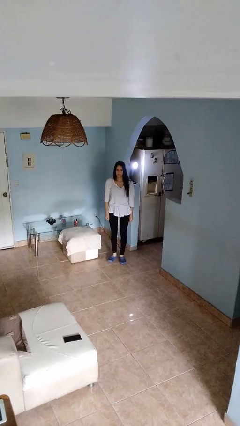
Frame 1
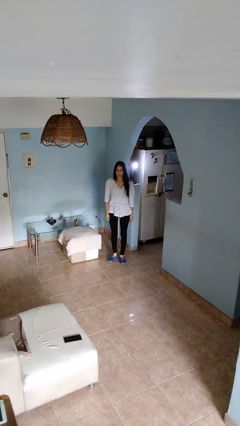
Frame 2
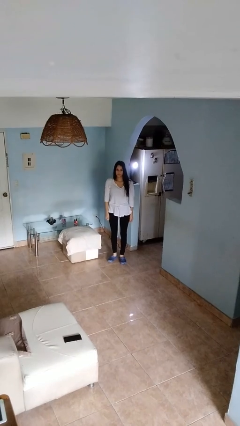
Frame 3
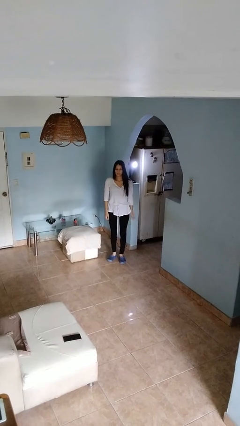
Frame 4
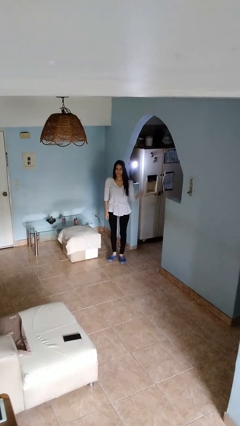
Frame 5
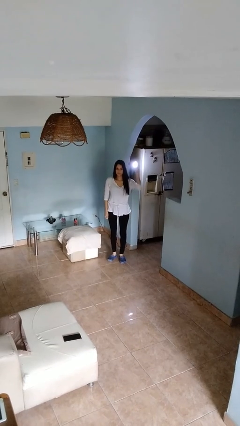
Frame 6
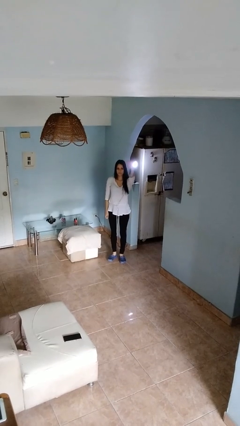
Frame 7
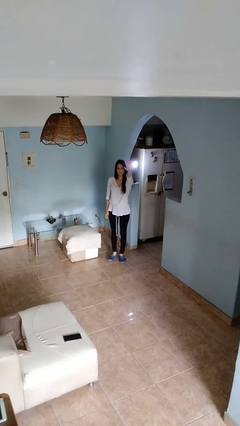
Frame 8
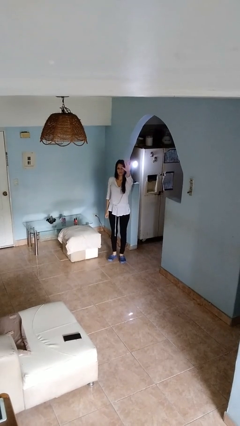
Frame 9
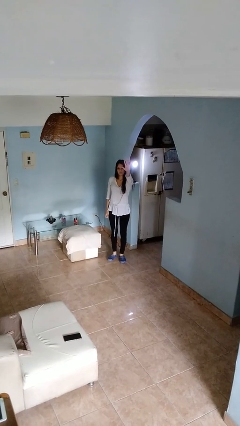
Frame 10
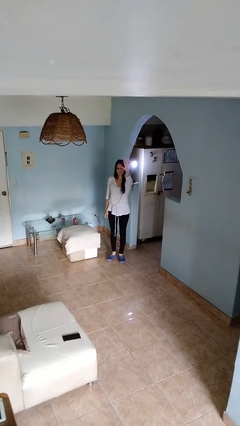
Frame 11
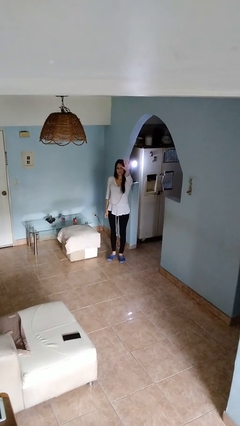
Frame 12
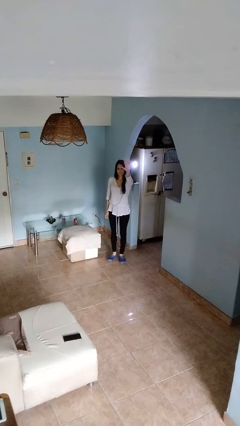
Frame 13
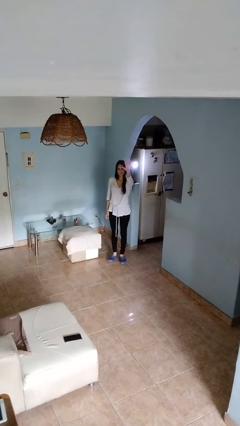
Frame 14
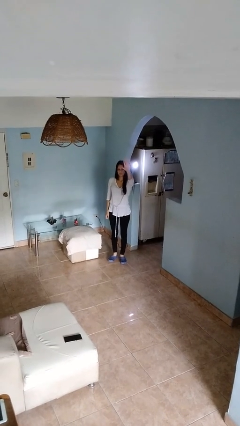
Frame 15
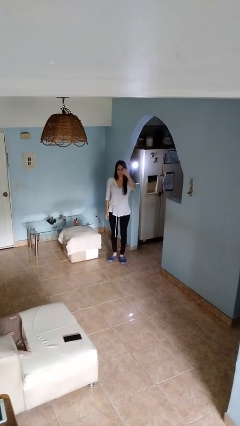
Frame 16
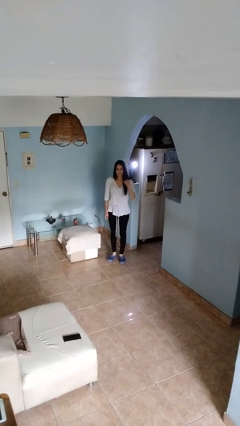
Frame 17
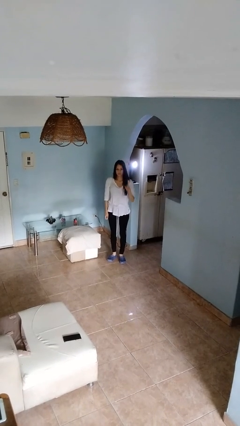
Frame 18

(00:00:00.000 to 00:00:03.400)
person gestures number five

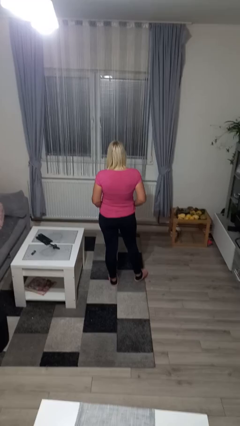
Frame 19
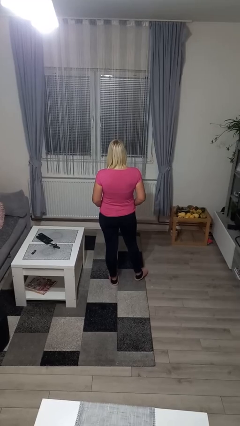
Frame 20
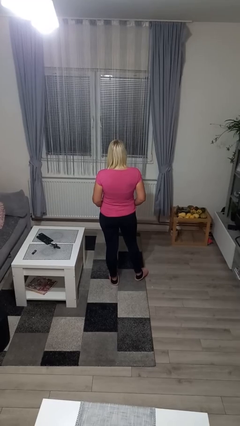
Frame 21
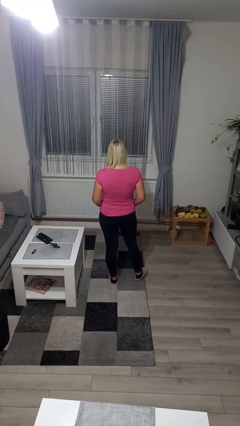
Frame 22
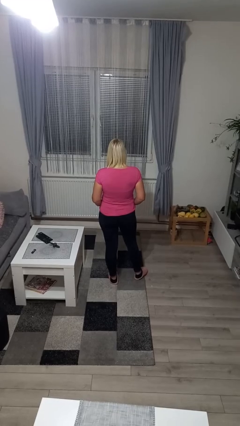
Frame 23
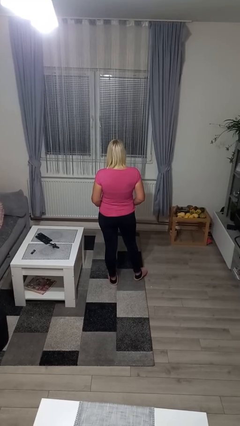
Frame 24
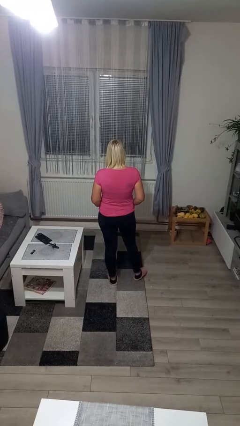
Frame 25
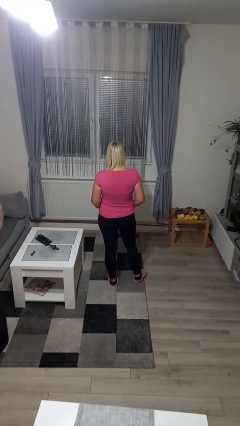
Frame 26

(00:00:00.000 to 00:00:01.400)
person puts hands in back pockets

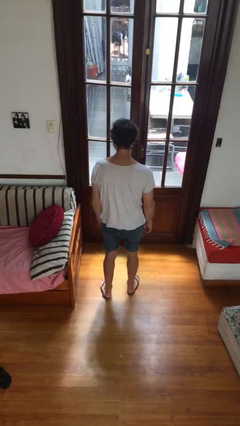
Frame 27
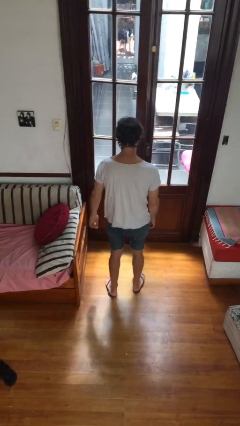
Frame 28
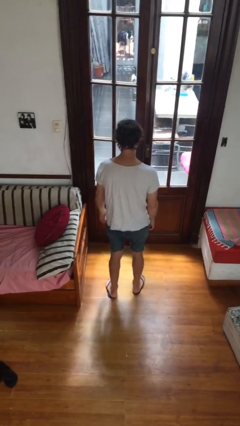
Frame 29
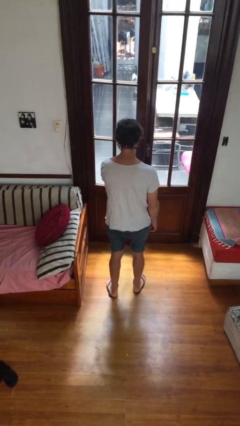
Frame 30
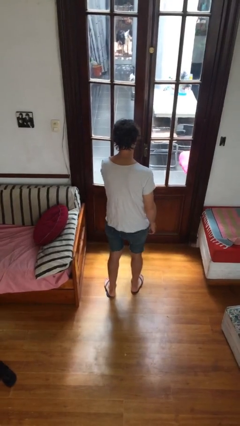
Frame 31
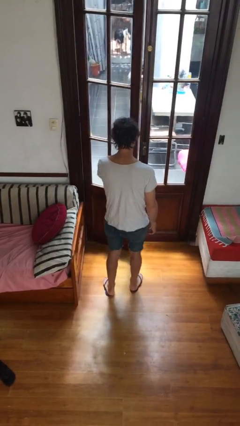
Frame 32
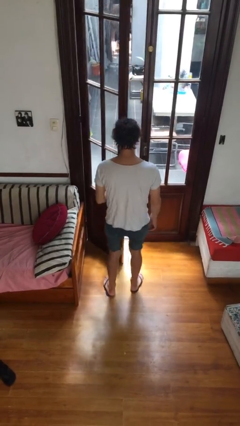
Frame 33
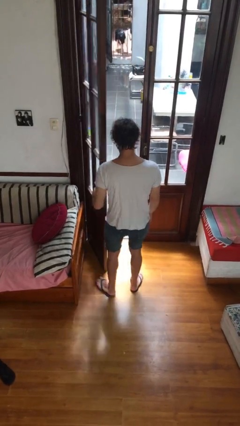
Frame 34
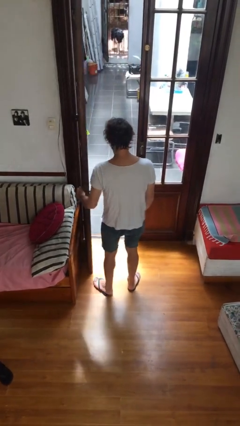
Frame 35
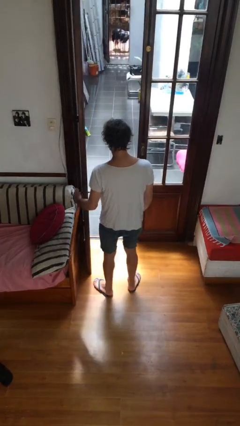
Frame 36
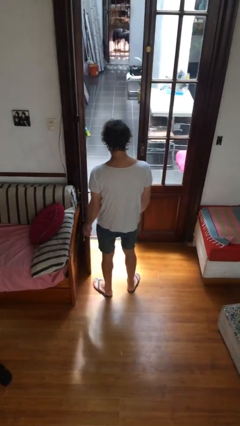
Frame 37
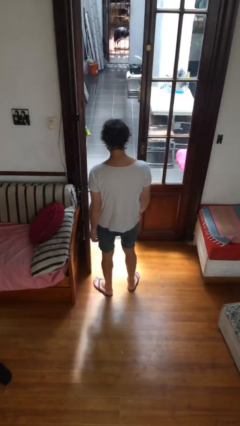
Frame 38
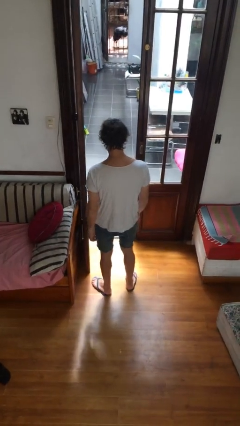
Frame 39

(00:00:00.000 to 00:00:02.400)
person opens facility door

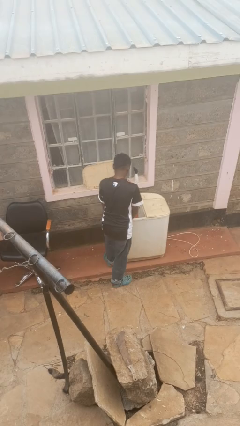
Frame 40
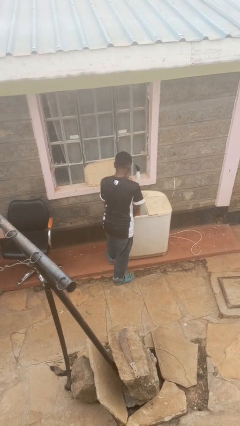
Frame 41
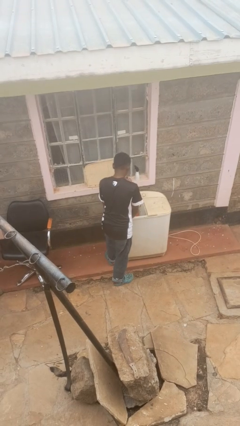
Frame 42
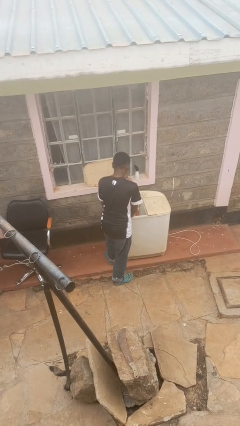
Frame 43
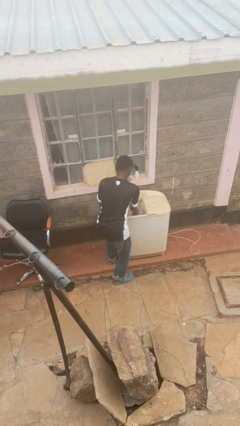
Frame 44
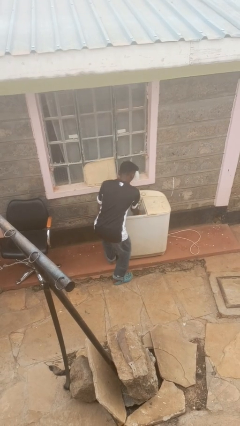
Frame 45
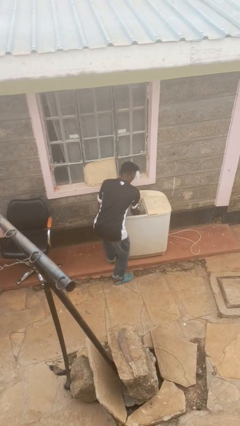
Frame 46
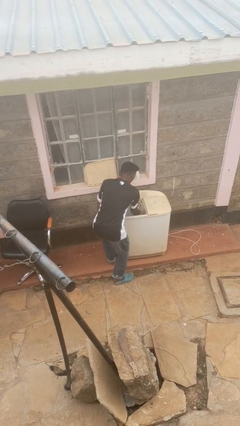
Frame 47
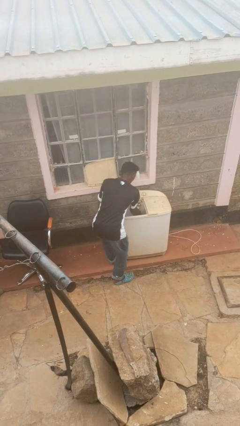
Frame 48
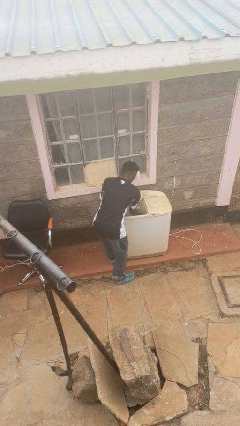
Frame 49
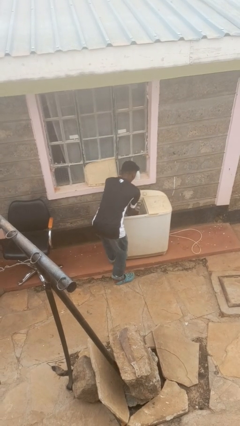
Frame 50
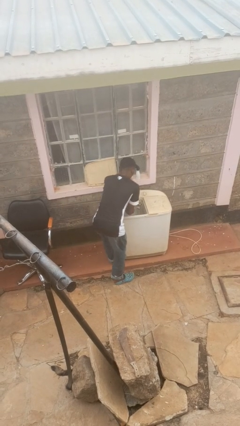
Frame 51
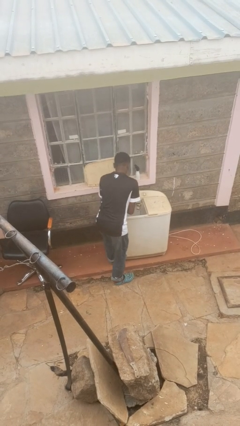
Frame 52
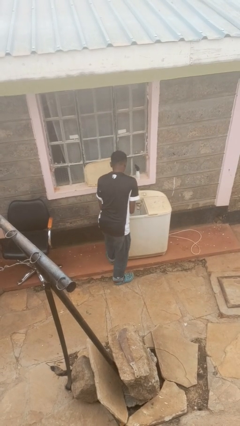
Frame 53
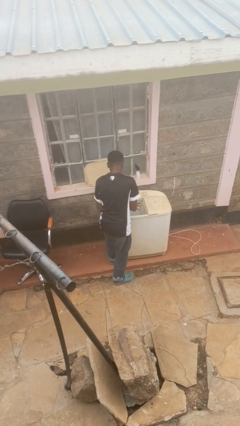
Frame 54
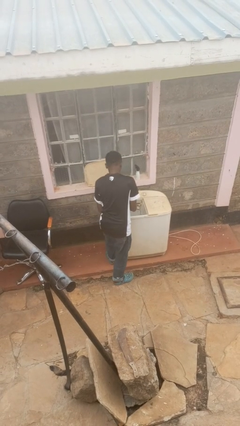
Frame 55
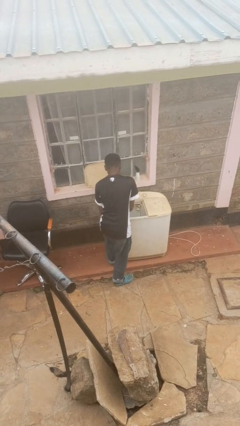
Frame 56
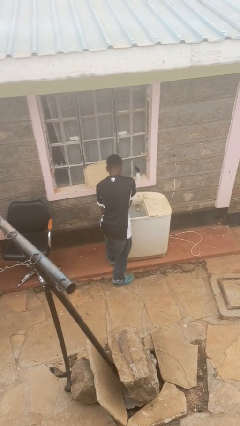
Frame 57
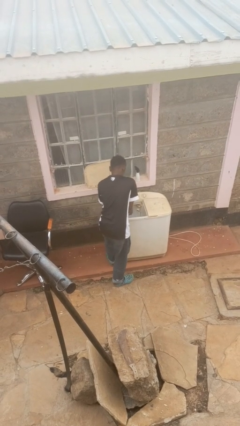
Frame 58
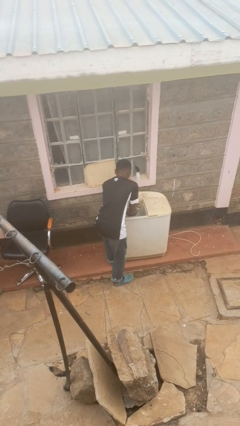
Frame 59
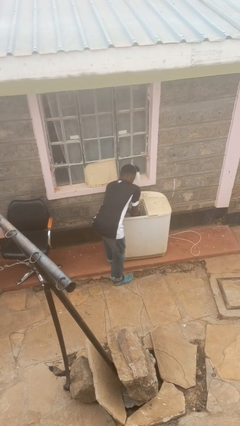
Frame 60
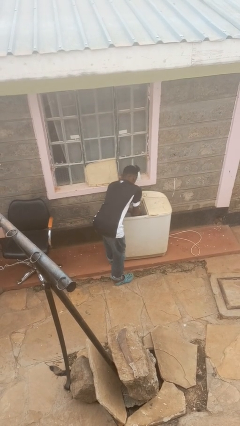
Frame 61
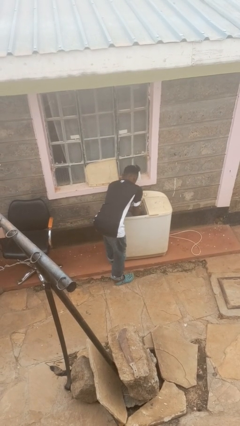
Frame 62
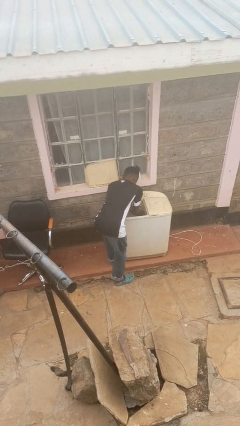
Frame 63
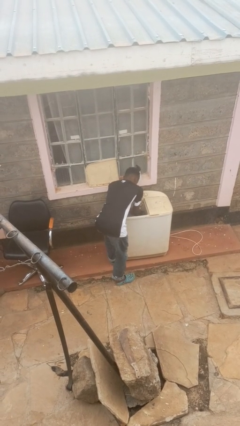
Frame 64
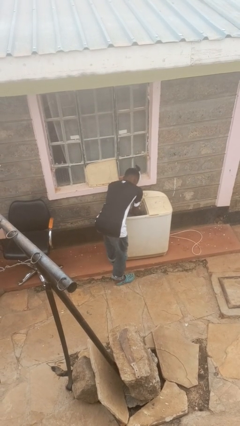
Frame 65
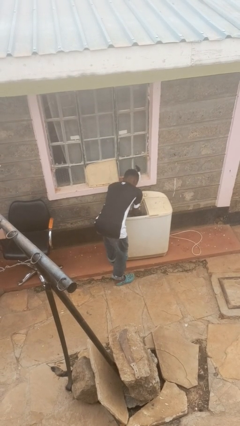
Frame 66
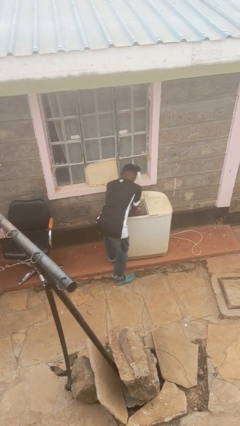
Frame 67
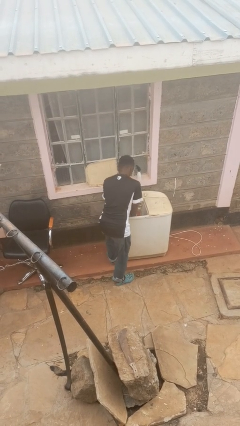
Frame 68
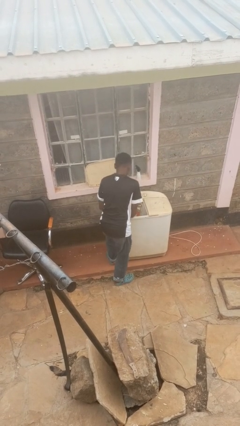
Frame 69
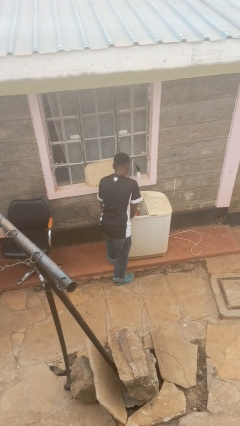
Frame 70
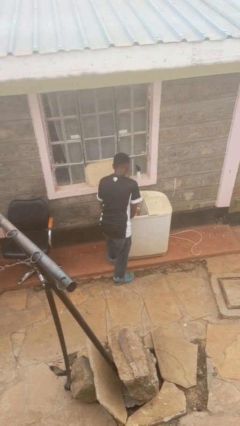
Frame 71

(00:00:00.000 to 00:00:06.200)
person cleans dryer lint trap

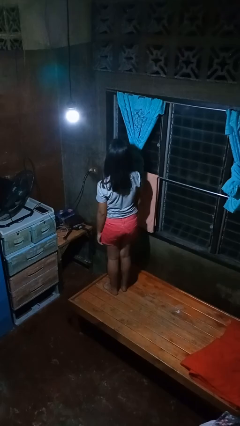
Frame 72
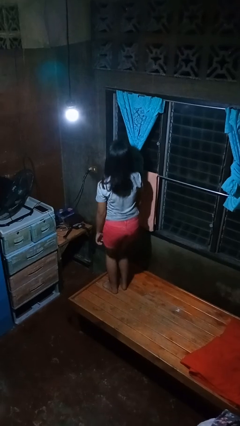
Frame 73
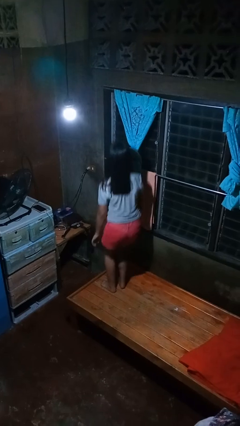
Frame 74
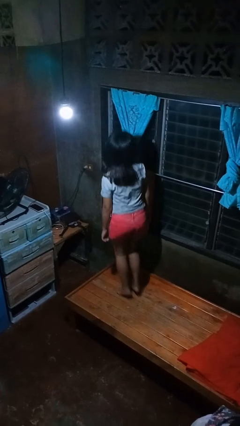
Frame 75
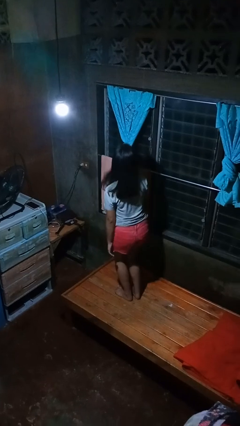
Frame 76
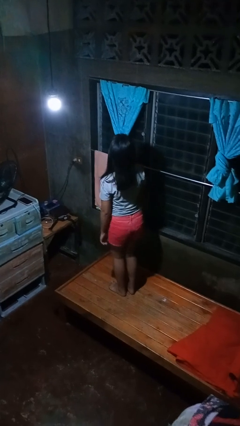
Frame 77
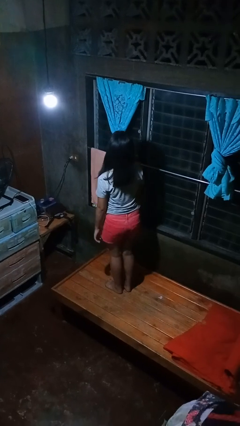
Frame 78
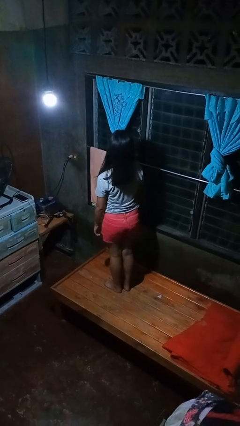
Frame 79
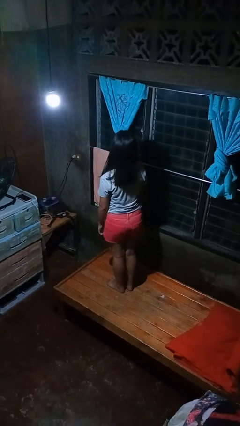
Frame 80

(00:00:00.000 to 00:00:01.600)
person jumps on bed

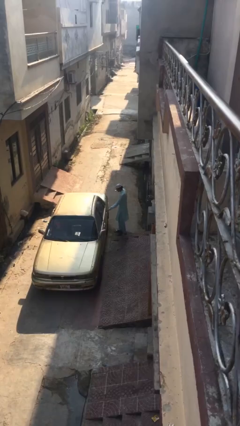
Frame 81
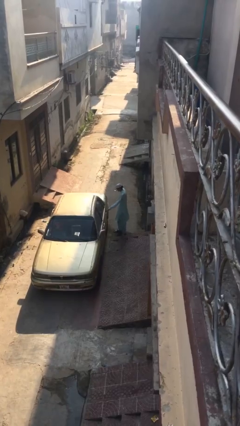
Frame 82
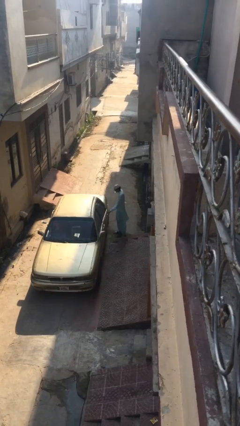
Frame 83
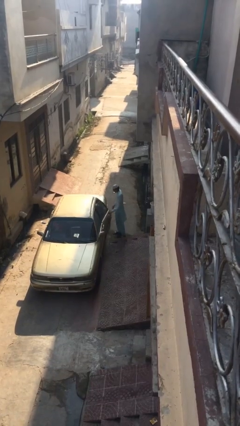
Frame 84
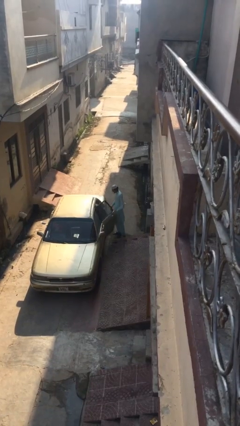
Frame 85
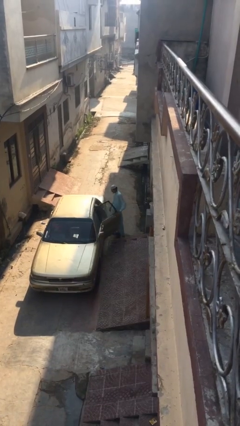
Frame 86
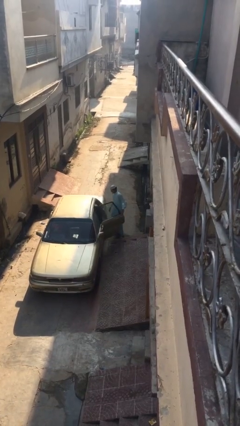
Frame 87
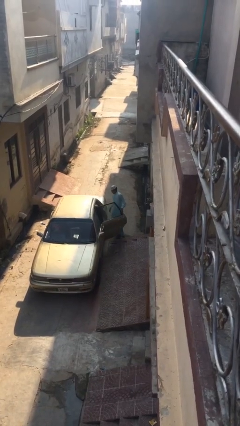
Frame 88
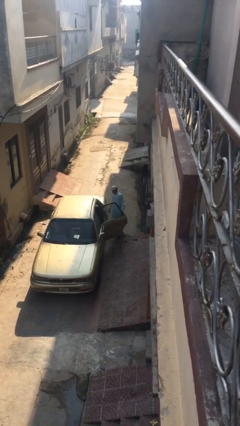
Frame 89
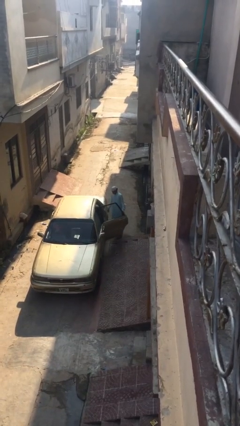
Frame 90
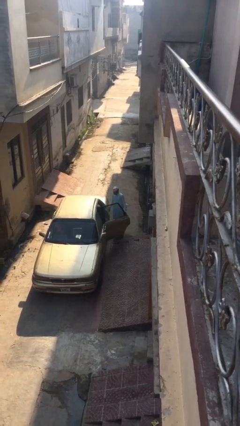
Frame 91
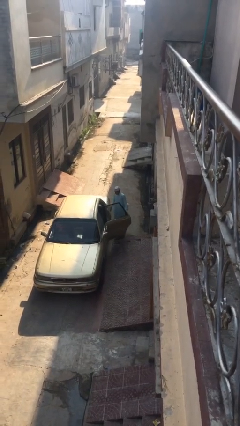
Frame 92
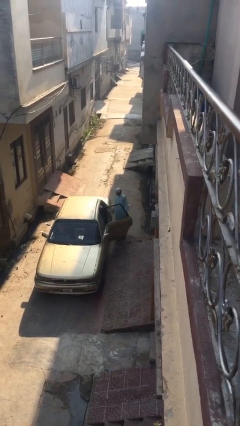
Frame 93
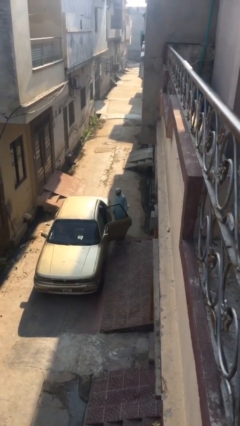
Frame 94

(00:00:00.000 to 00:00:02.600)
person opens car door
